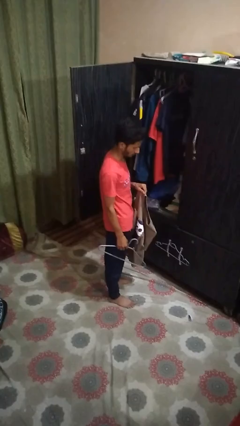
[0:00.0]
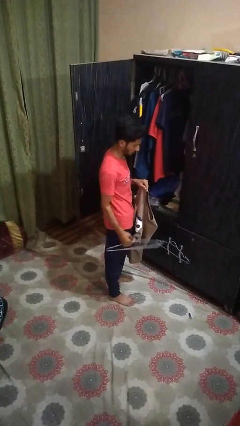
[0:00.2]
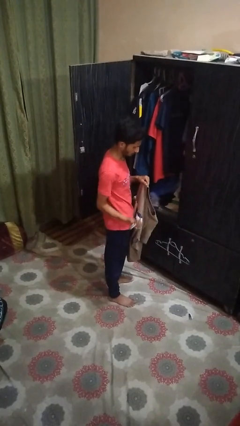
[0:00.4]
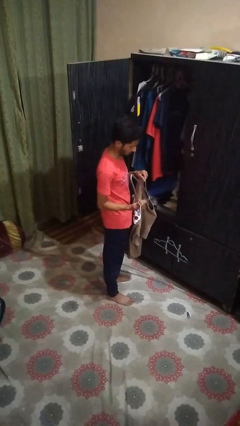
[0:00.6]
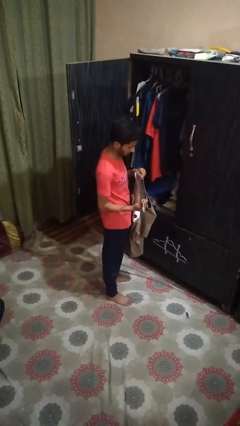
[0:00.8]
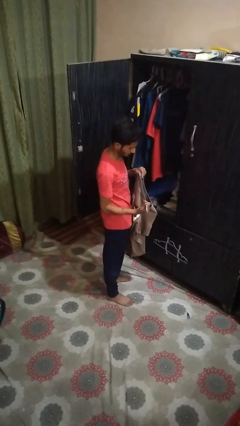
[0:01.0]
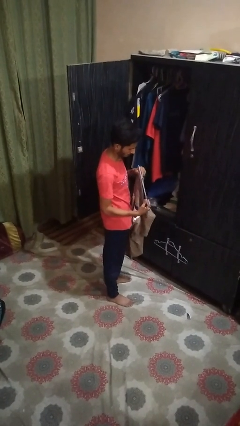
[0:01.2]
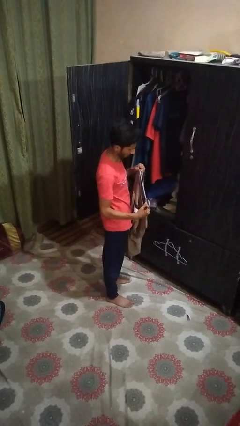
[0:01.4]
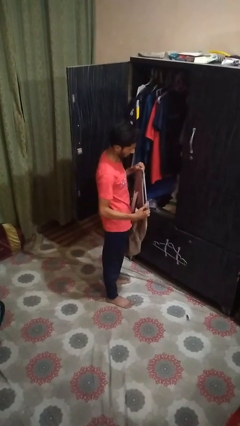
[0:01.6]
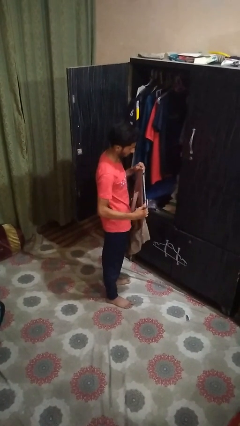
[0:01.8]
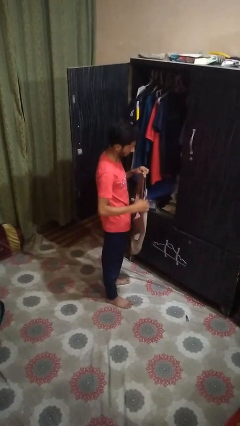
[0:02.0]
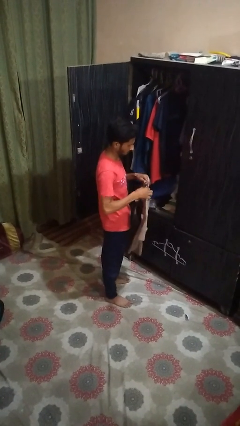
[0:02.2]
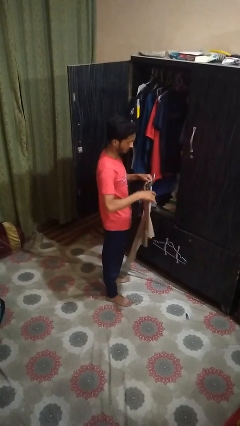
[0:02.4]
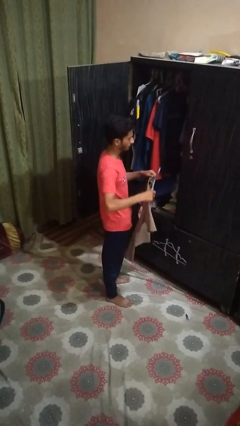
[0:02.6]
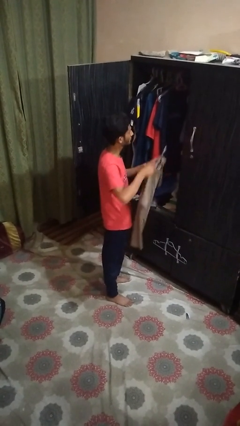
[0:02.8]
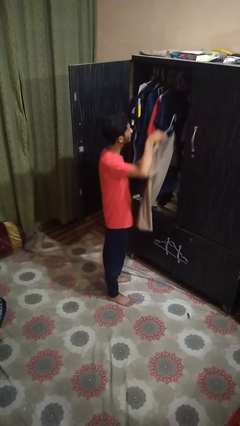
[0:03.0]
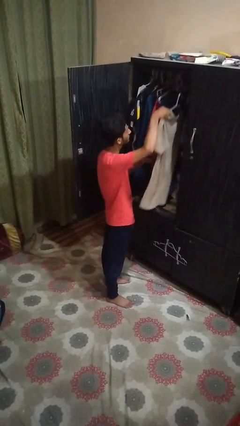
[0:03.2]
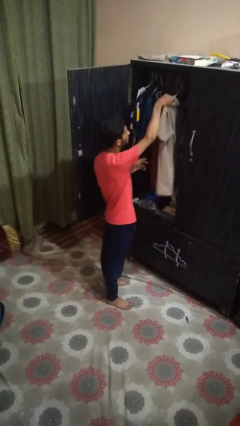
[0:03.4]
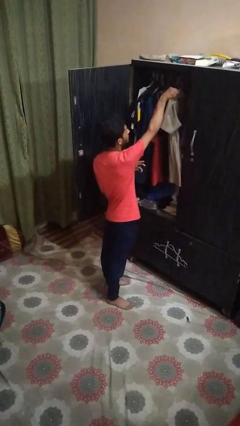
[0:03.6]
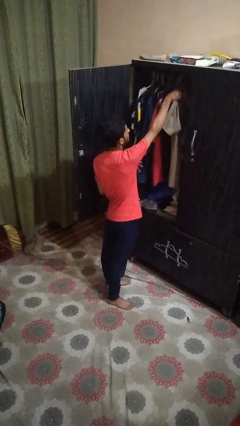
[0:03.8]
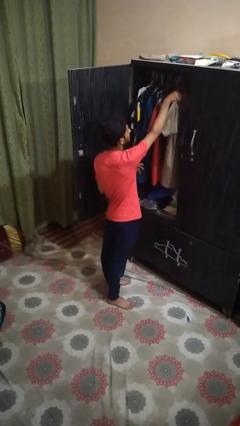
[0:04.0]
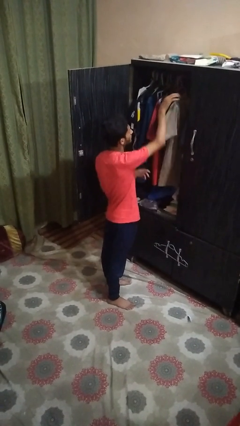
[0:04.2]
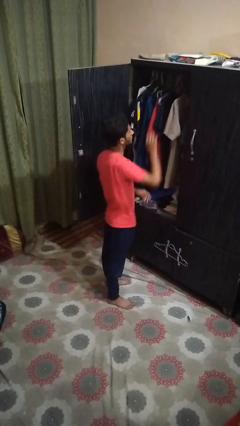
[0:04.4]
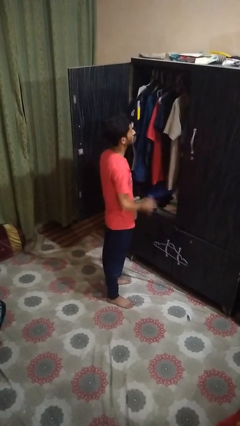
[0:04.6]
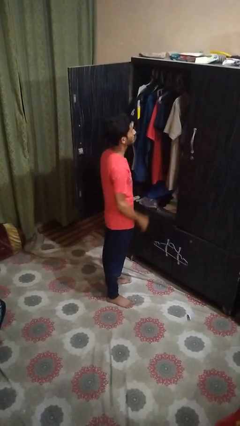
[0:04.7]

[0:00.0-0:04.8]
person puts clothes into closet

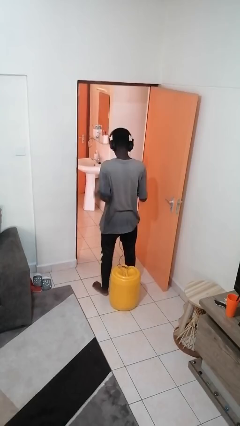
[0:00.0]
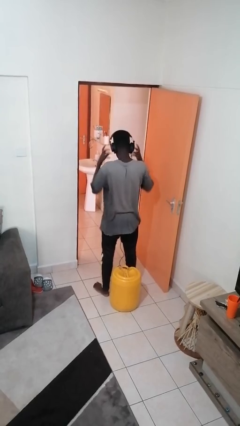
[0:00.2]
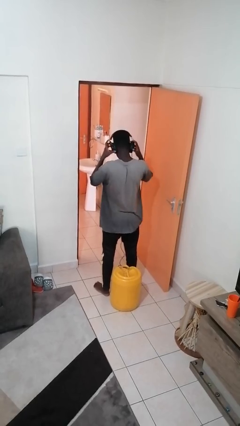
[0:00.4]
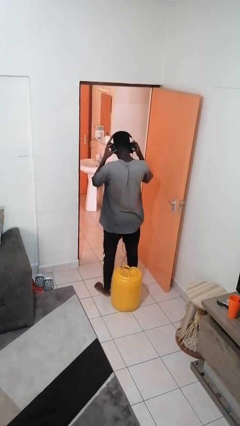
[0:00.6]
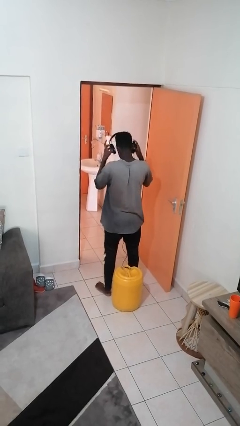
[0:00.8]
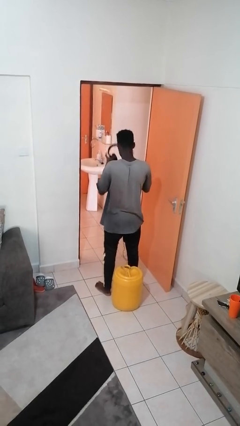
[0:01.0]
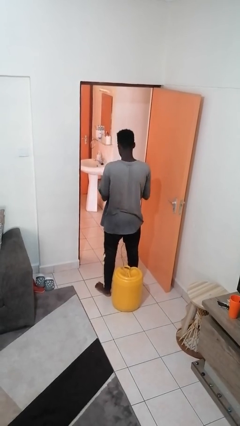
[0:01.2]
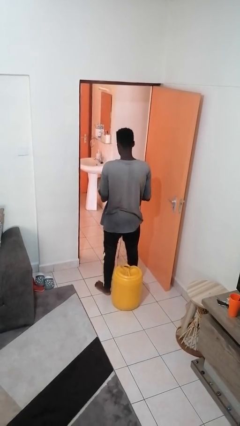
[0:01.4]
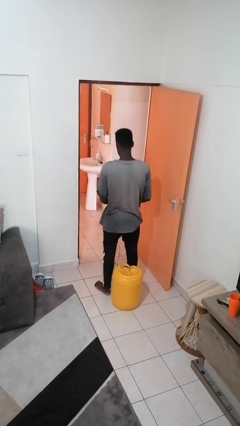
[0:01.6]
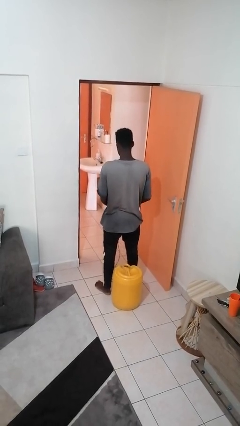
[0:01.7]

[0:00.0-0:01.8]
person takes off headphones

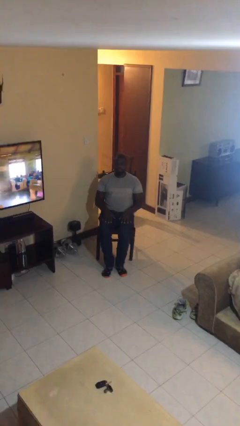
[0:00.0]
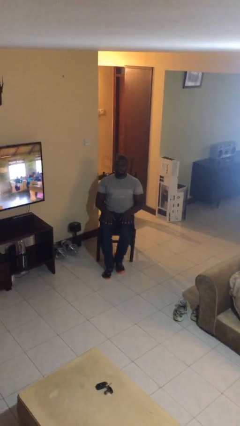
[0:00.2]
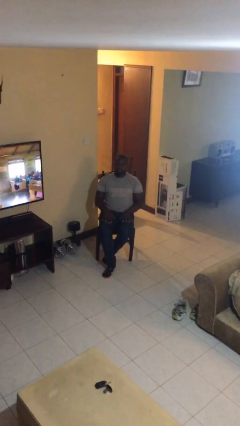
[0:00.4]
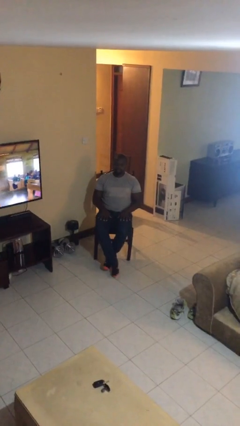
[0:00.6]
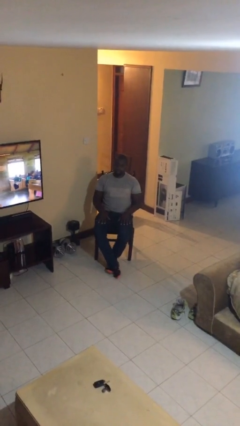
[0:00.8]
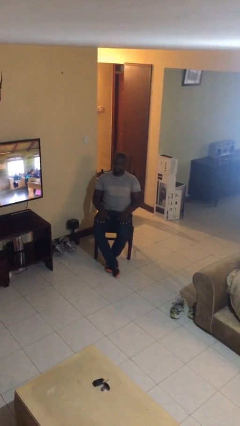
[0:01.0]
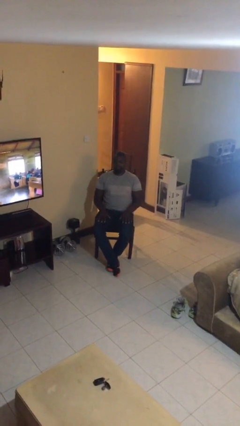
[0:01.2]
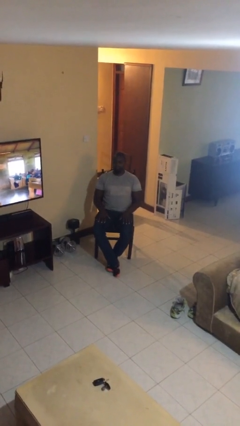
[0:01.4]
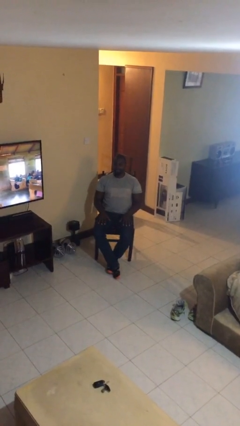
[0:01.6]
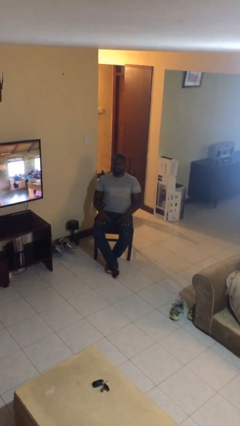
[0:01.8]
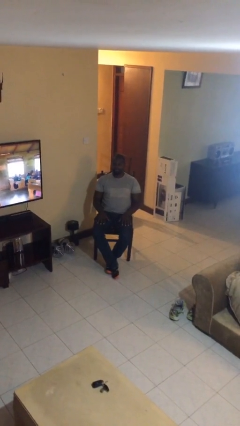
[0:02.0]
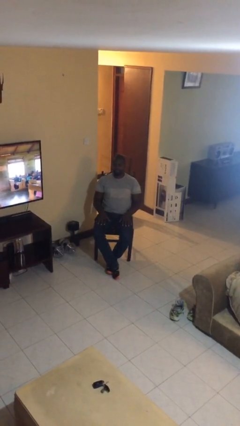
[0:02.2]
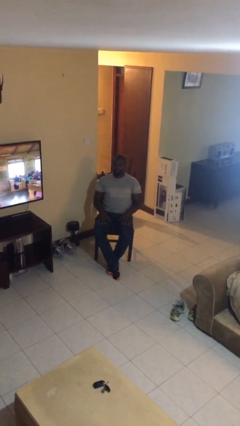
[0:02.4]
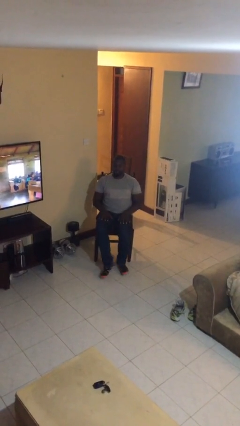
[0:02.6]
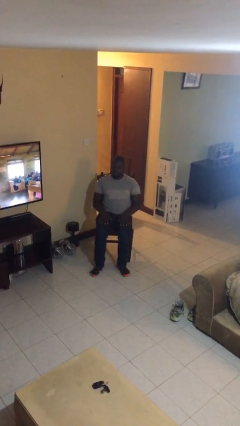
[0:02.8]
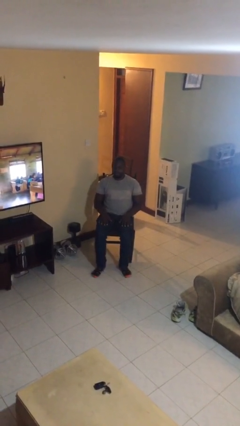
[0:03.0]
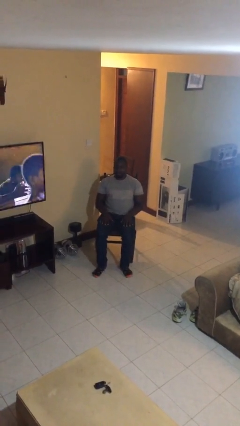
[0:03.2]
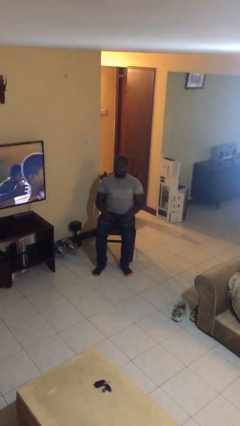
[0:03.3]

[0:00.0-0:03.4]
person crosses legs

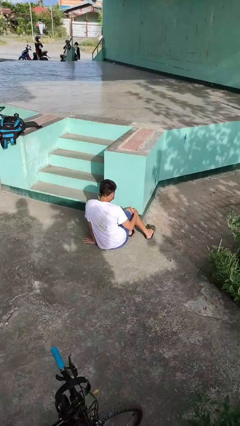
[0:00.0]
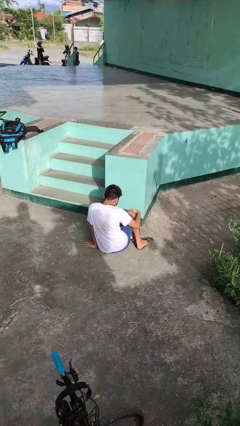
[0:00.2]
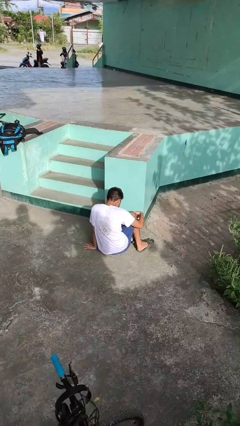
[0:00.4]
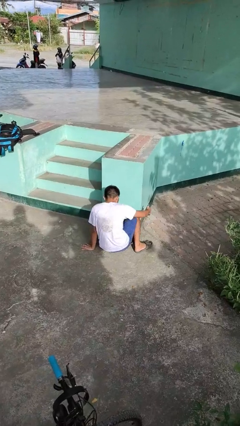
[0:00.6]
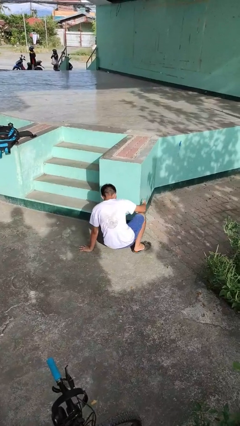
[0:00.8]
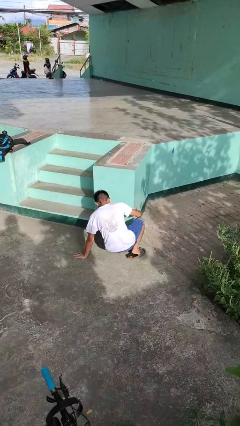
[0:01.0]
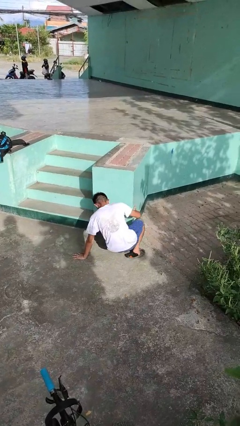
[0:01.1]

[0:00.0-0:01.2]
person lies down on floor

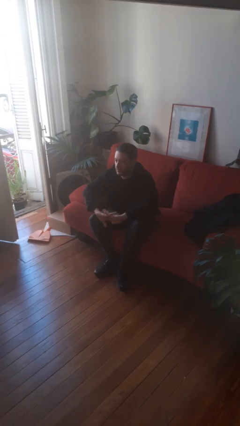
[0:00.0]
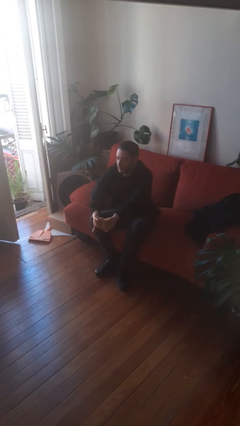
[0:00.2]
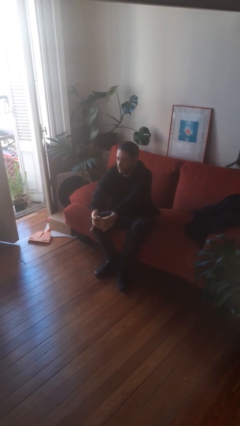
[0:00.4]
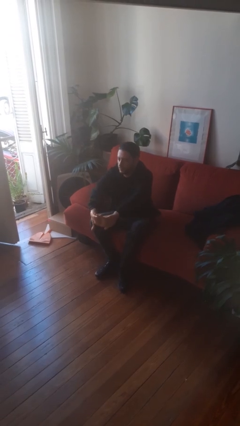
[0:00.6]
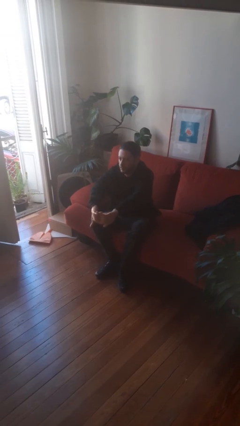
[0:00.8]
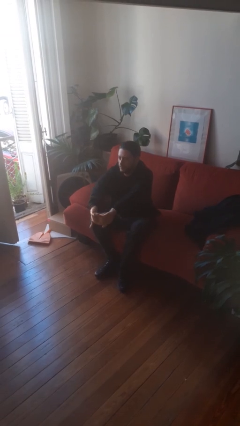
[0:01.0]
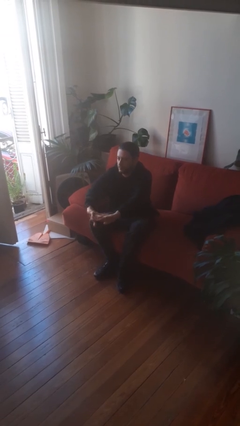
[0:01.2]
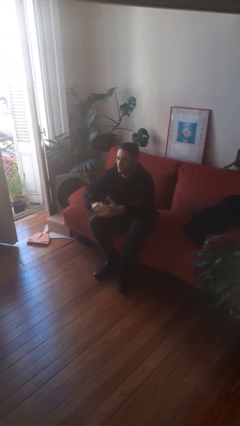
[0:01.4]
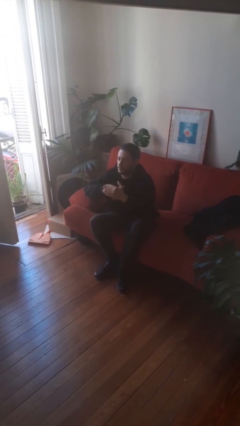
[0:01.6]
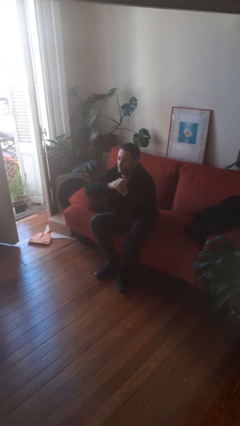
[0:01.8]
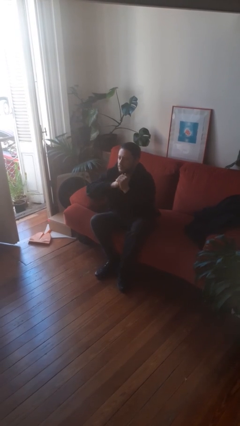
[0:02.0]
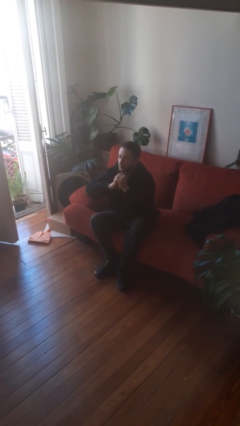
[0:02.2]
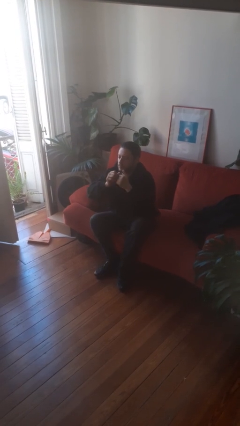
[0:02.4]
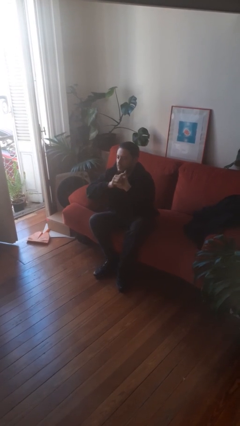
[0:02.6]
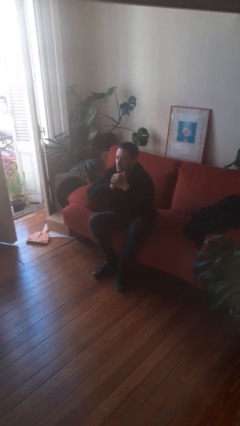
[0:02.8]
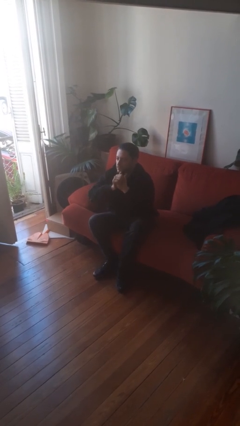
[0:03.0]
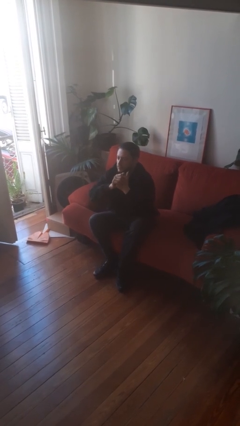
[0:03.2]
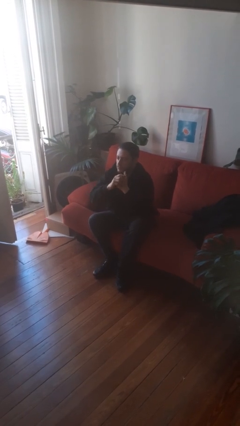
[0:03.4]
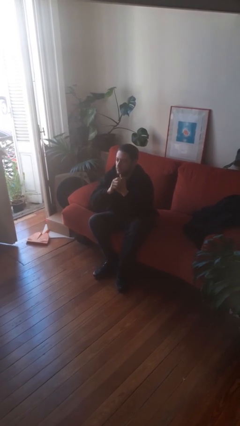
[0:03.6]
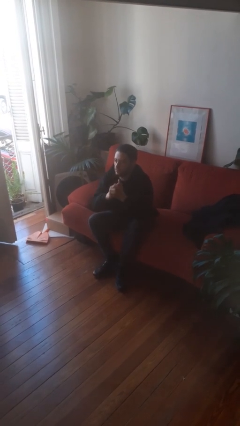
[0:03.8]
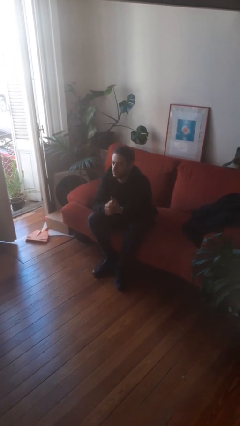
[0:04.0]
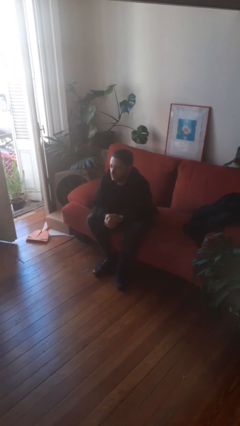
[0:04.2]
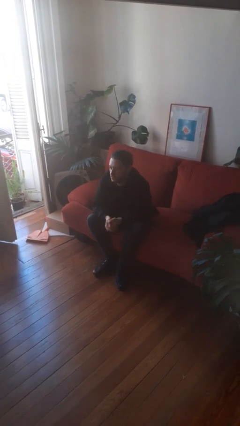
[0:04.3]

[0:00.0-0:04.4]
person cracks knuckles

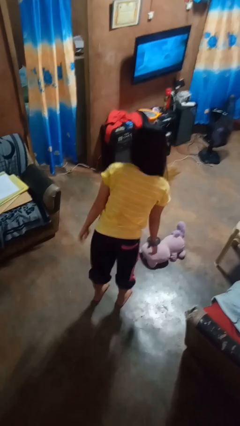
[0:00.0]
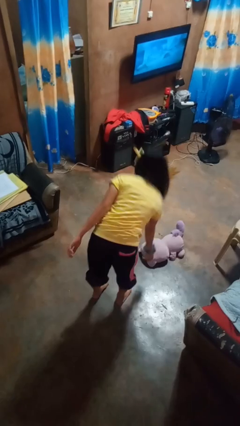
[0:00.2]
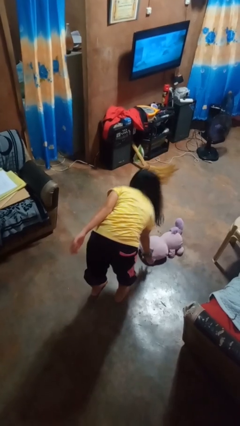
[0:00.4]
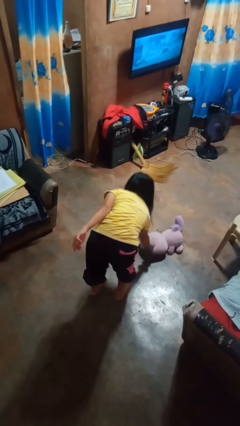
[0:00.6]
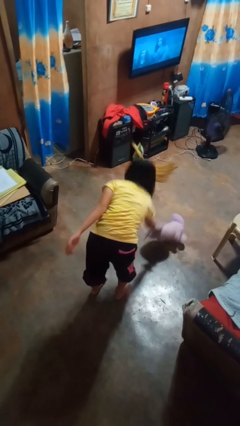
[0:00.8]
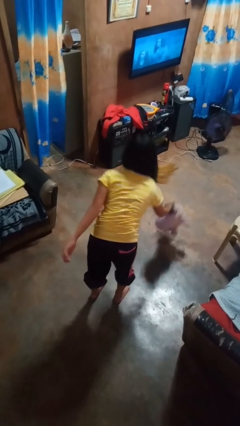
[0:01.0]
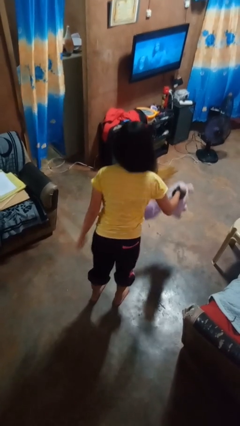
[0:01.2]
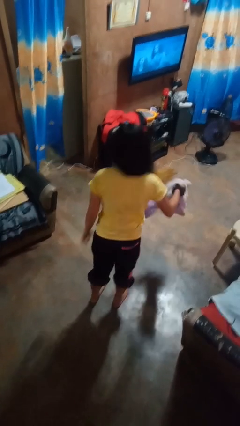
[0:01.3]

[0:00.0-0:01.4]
person picks up object from floor

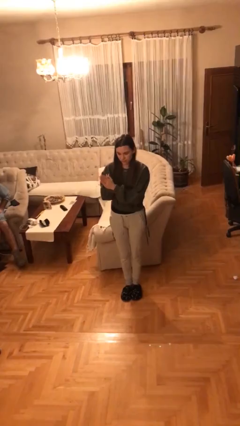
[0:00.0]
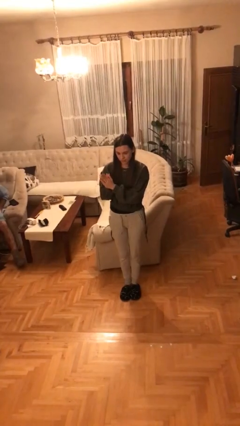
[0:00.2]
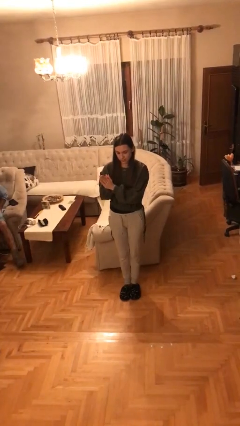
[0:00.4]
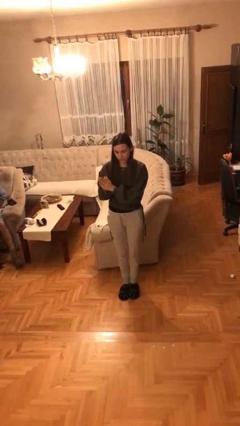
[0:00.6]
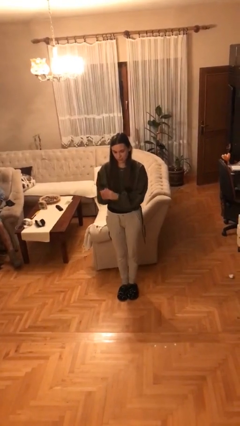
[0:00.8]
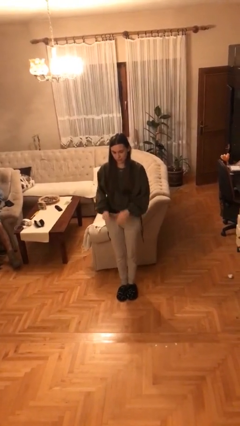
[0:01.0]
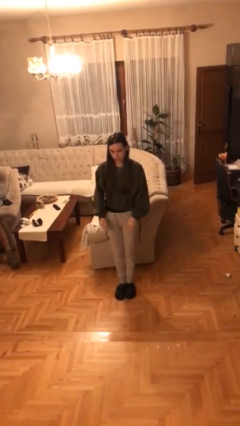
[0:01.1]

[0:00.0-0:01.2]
person claps hands
